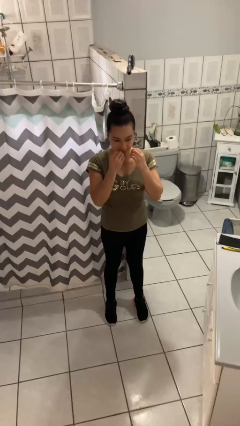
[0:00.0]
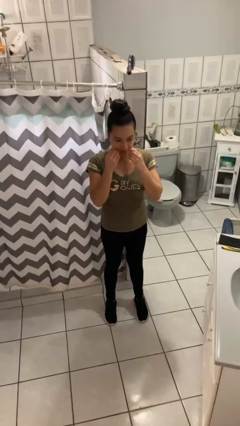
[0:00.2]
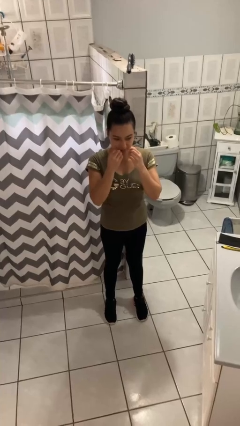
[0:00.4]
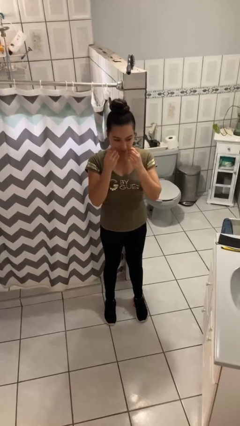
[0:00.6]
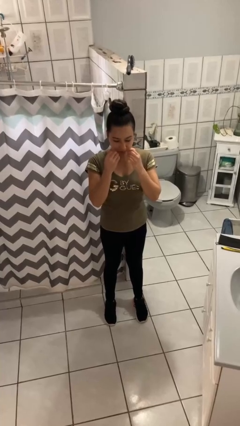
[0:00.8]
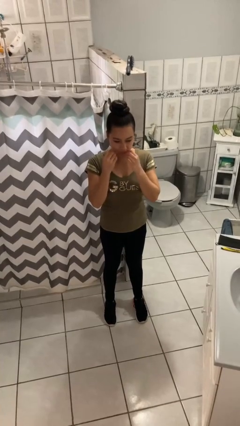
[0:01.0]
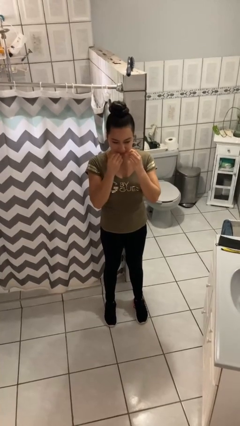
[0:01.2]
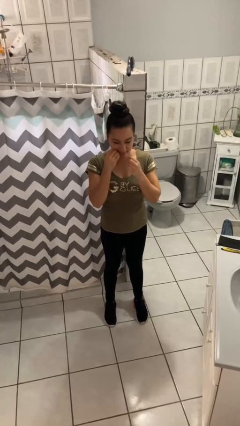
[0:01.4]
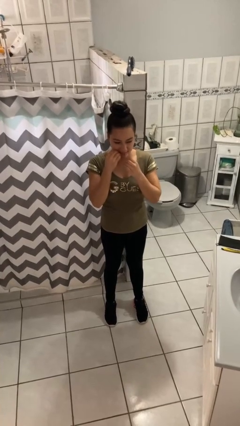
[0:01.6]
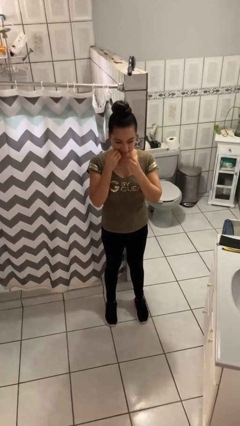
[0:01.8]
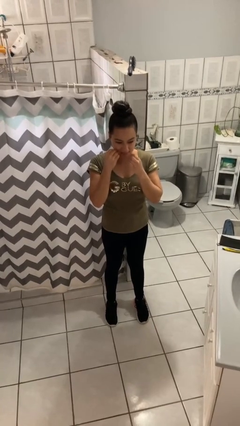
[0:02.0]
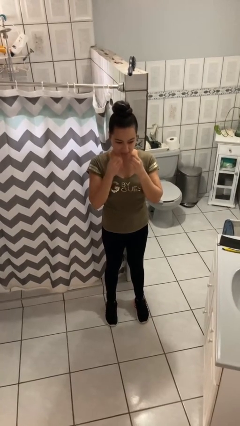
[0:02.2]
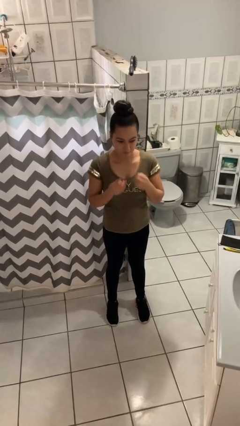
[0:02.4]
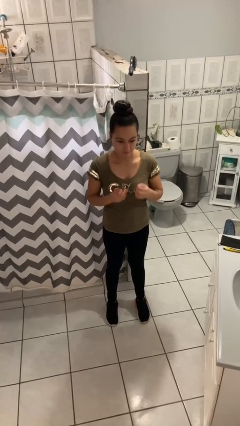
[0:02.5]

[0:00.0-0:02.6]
person flosses

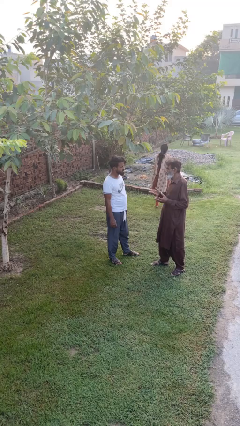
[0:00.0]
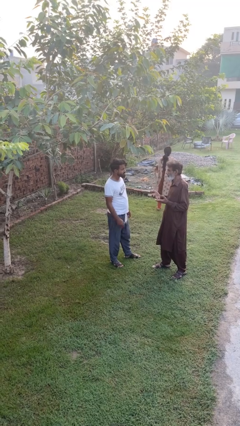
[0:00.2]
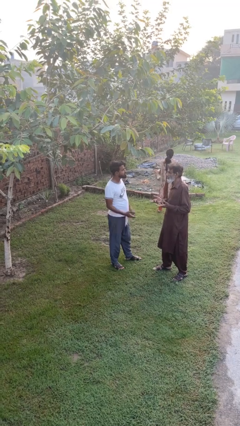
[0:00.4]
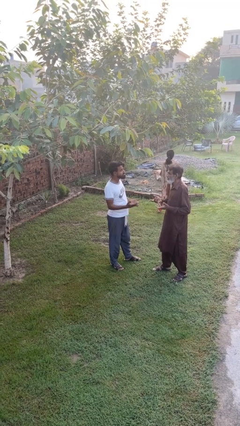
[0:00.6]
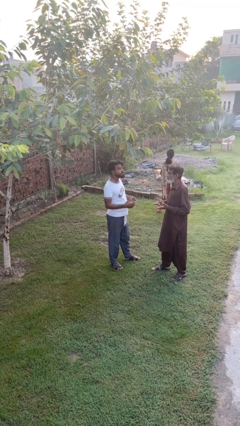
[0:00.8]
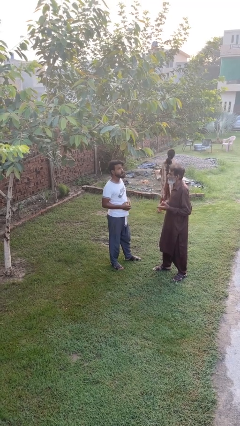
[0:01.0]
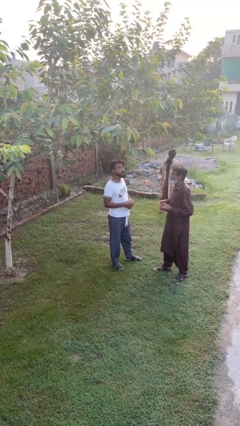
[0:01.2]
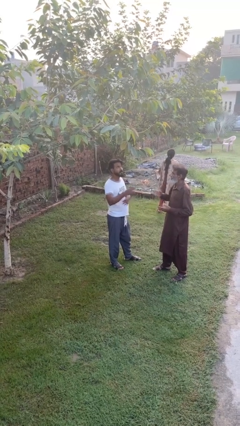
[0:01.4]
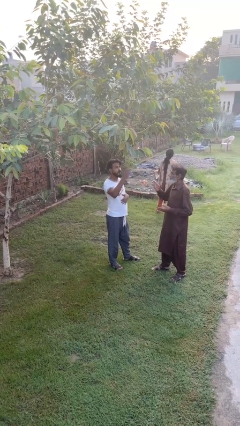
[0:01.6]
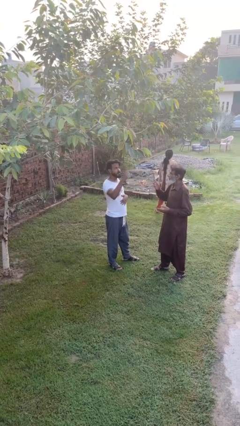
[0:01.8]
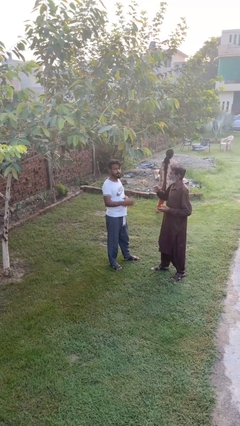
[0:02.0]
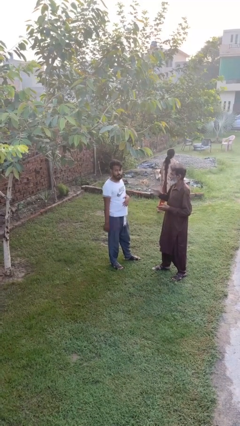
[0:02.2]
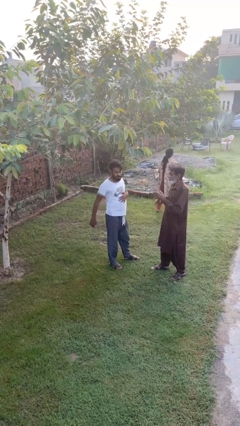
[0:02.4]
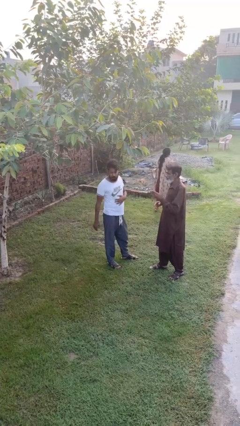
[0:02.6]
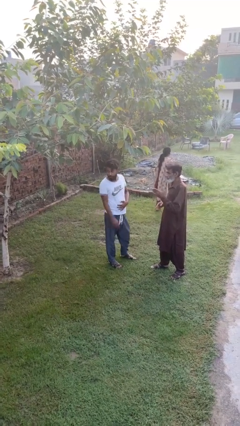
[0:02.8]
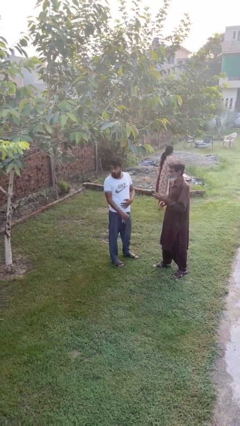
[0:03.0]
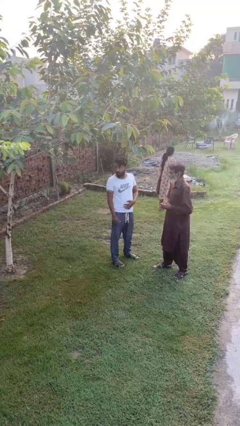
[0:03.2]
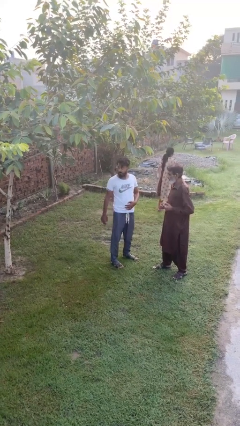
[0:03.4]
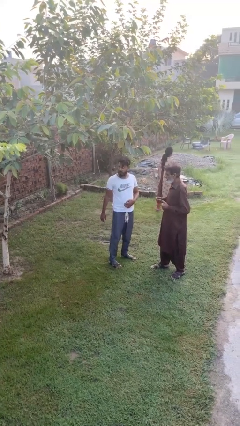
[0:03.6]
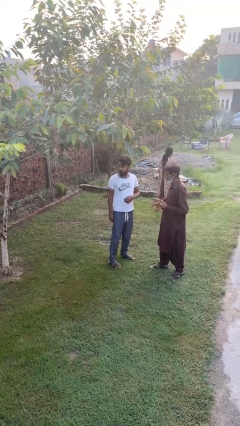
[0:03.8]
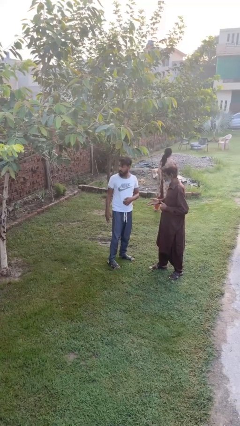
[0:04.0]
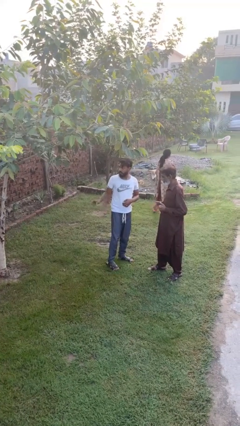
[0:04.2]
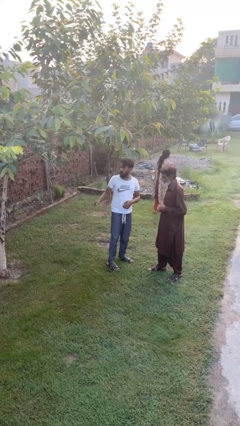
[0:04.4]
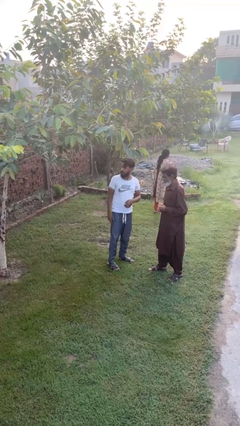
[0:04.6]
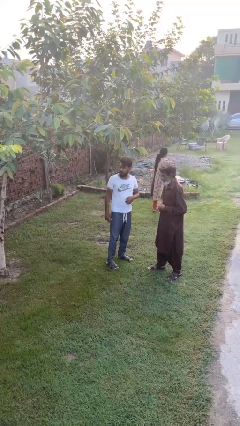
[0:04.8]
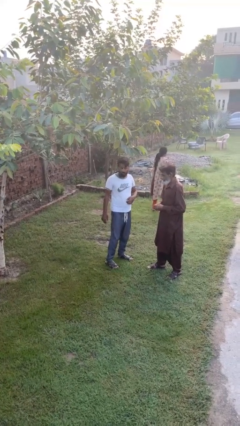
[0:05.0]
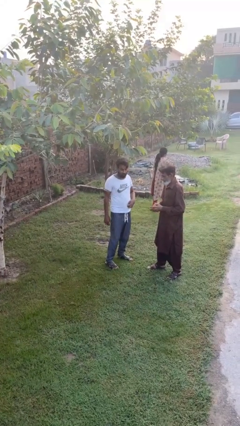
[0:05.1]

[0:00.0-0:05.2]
person talks to person

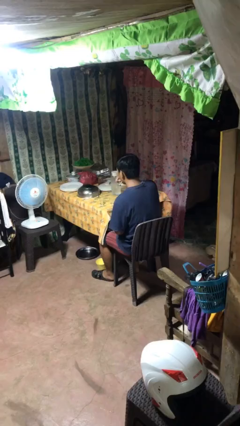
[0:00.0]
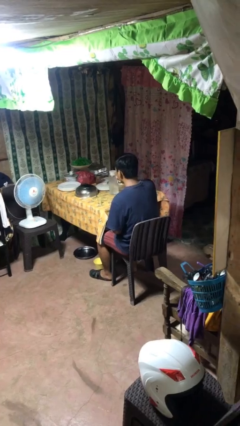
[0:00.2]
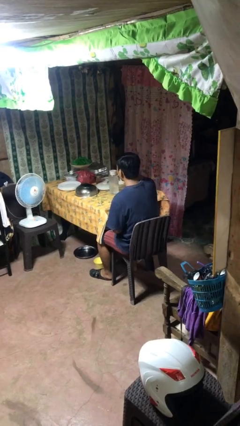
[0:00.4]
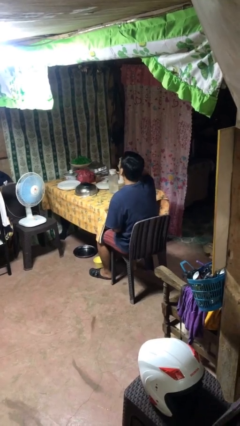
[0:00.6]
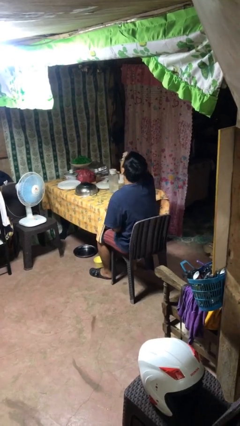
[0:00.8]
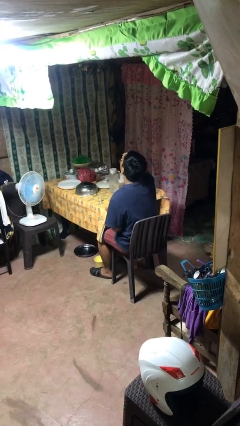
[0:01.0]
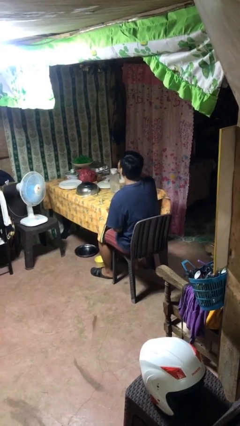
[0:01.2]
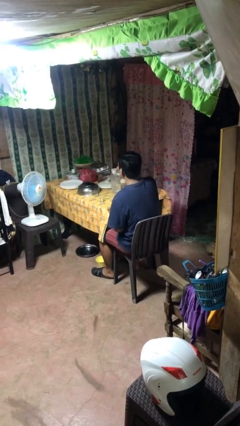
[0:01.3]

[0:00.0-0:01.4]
person drinks from shotglass

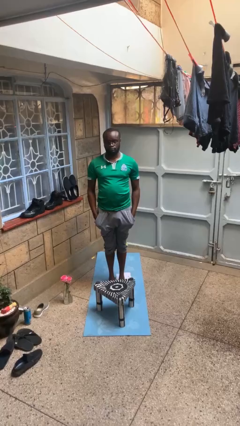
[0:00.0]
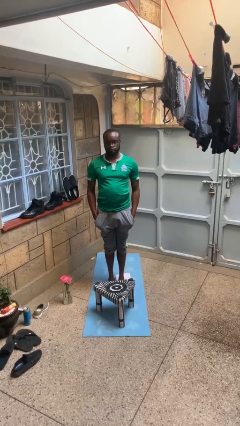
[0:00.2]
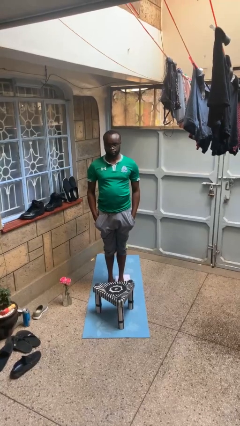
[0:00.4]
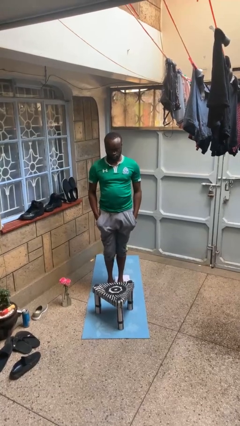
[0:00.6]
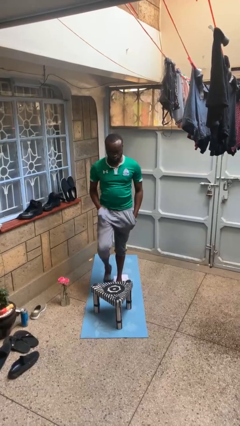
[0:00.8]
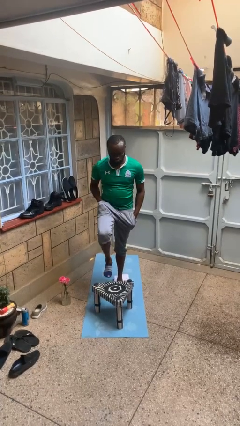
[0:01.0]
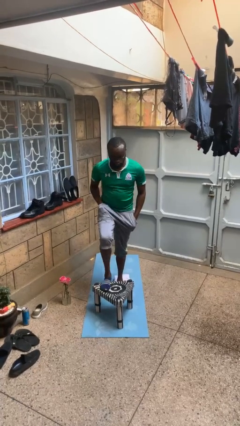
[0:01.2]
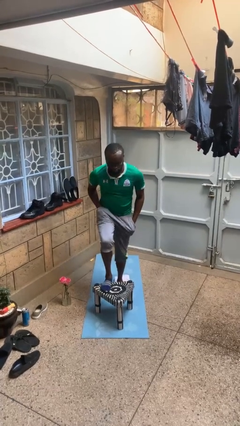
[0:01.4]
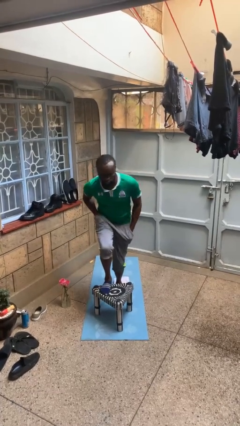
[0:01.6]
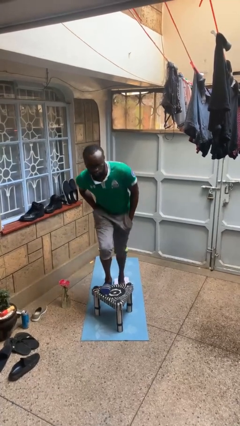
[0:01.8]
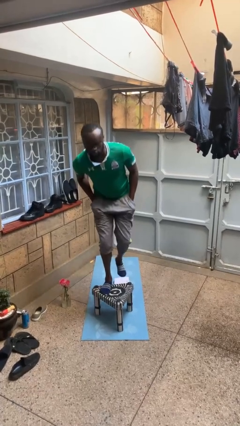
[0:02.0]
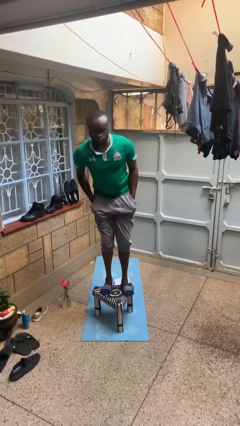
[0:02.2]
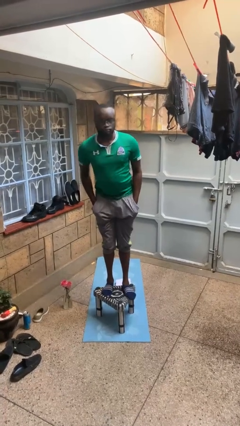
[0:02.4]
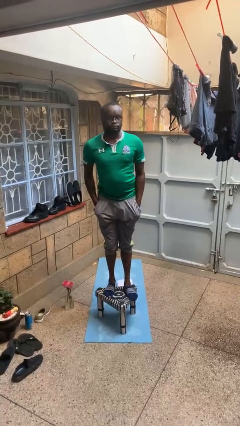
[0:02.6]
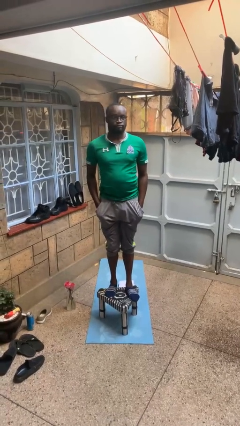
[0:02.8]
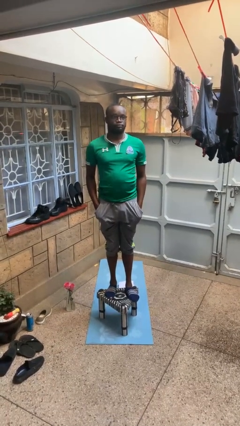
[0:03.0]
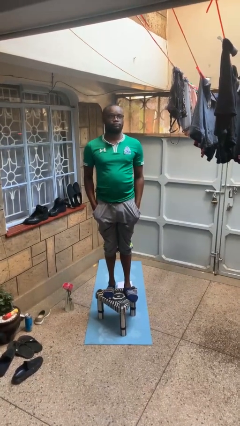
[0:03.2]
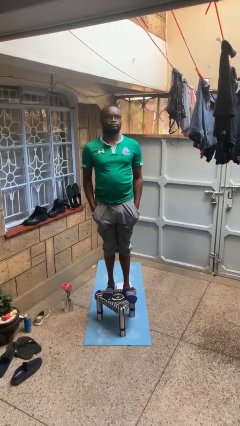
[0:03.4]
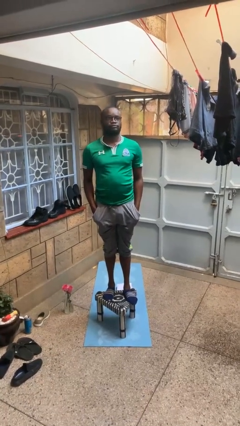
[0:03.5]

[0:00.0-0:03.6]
person climbs on table

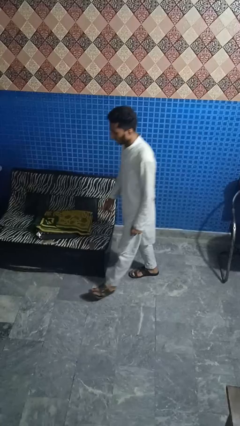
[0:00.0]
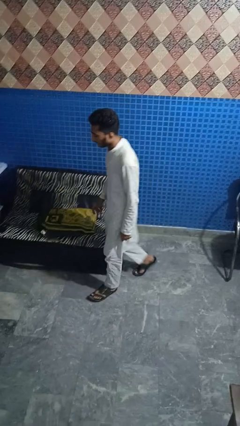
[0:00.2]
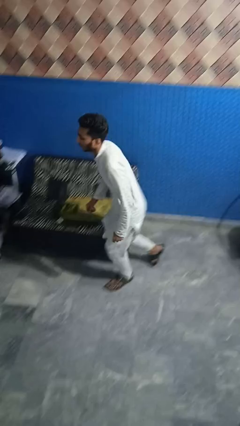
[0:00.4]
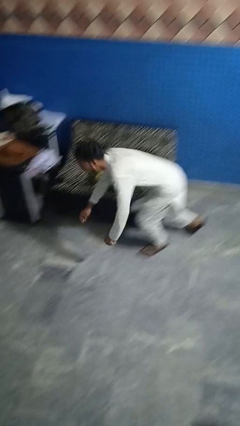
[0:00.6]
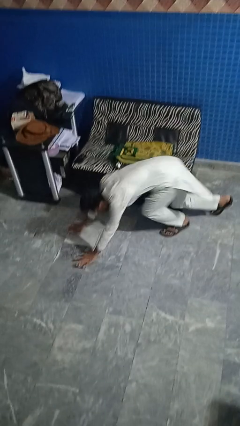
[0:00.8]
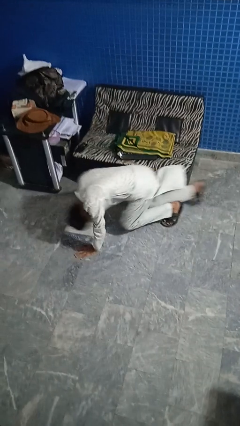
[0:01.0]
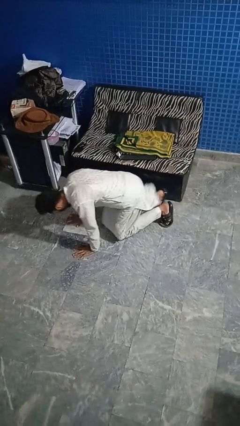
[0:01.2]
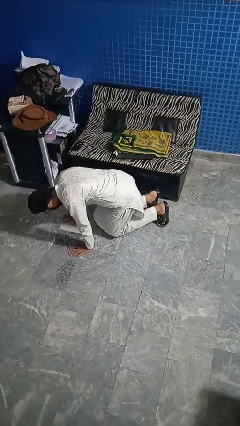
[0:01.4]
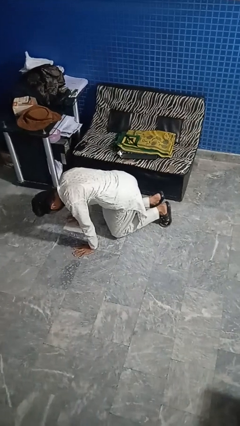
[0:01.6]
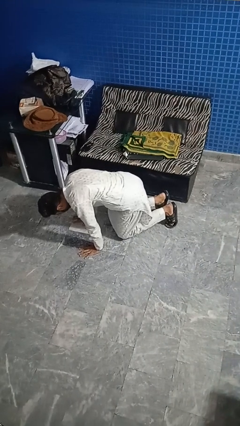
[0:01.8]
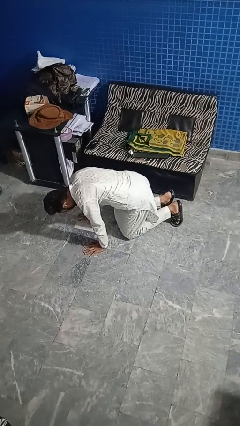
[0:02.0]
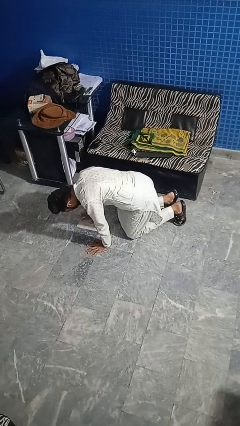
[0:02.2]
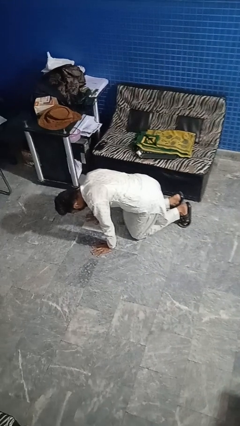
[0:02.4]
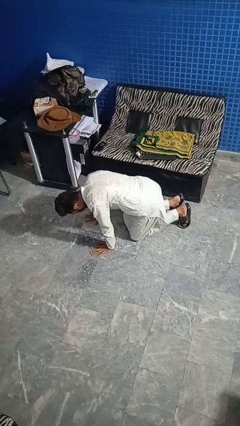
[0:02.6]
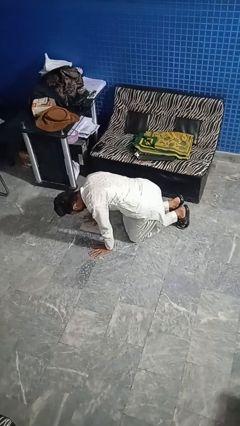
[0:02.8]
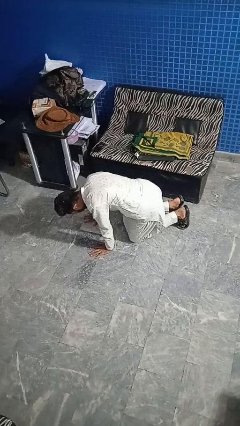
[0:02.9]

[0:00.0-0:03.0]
person trips on object on floor

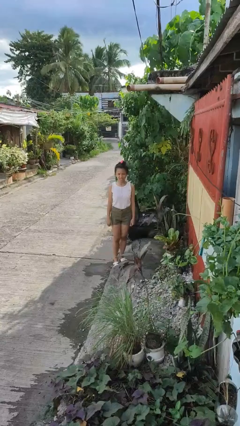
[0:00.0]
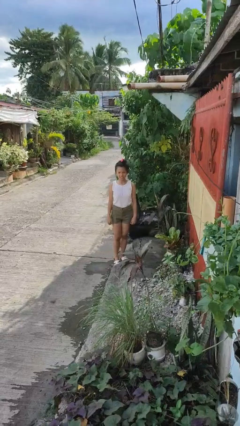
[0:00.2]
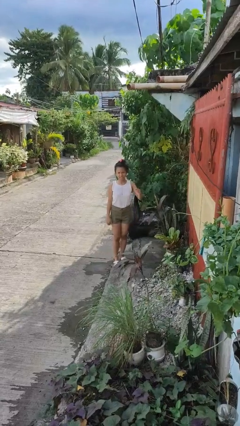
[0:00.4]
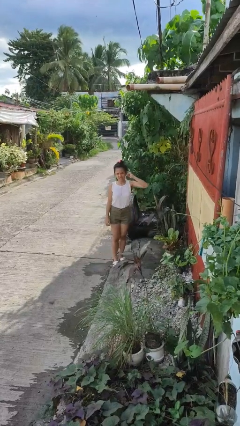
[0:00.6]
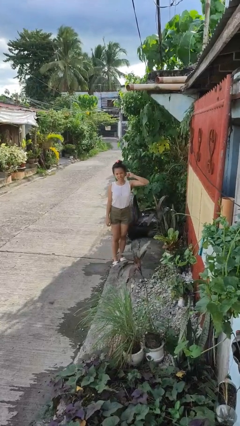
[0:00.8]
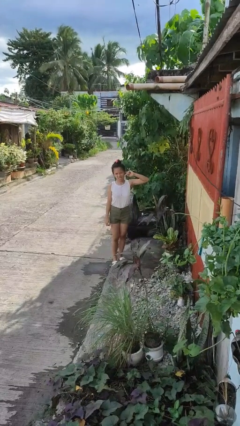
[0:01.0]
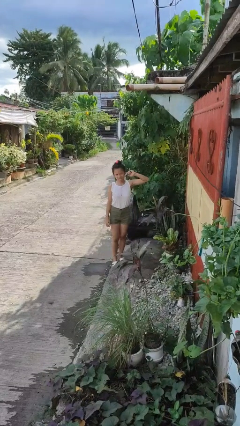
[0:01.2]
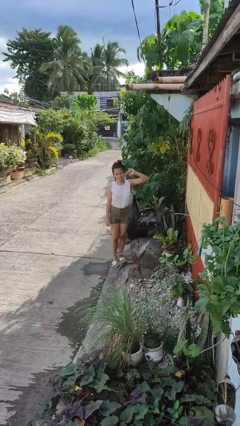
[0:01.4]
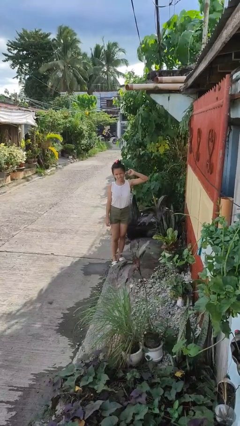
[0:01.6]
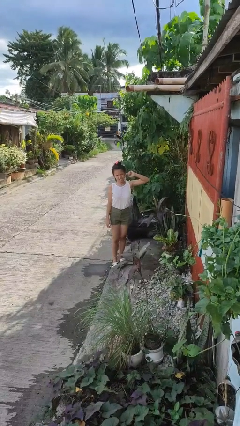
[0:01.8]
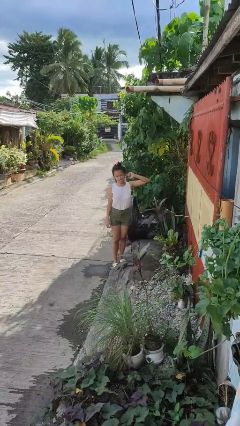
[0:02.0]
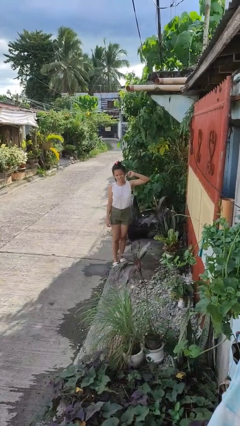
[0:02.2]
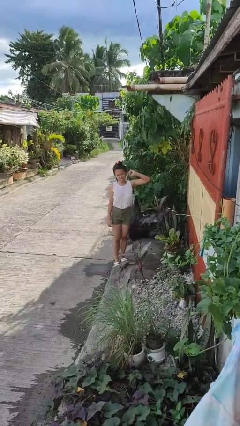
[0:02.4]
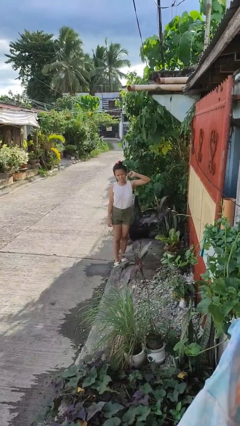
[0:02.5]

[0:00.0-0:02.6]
person touches earlobe
